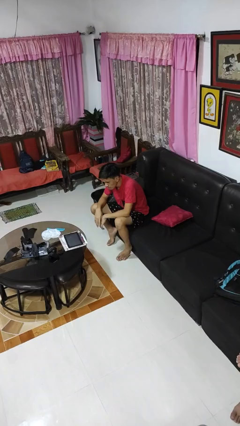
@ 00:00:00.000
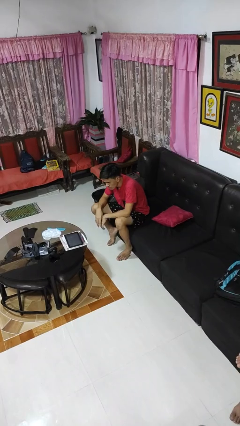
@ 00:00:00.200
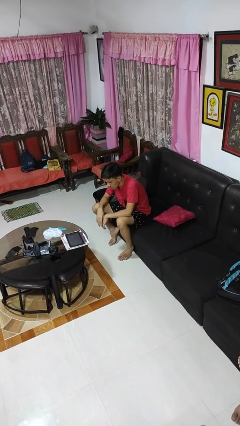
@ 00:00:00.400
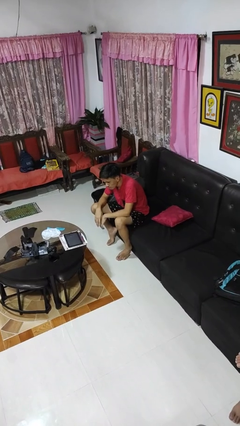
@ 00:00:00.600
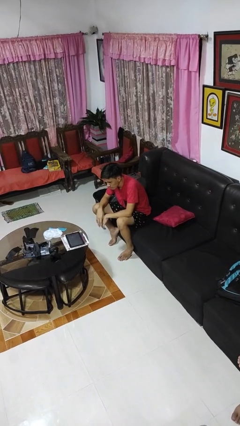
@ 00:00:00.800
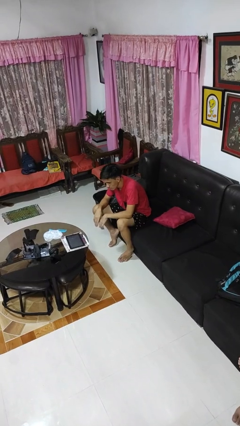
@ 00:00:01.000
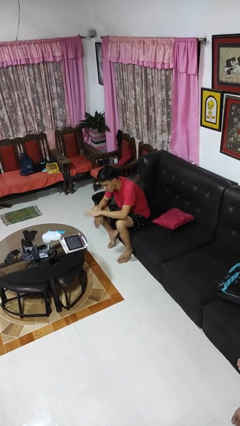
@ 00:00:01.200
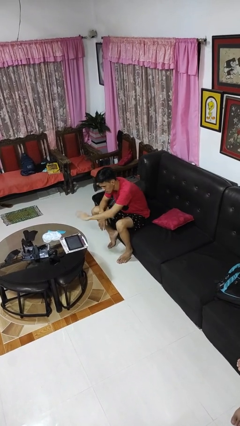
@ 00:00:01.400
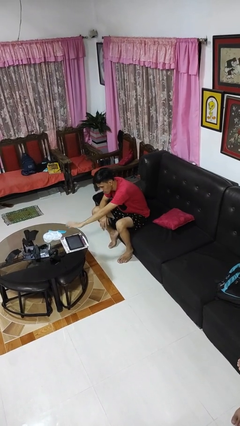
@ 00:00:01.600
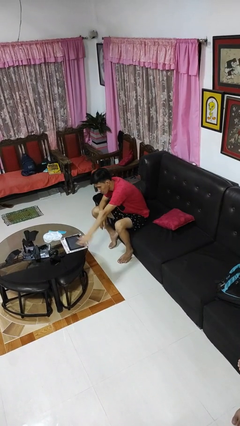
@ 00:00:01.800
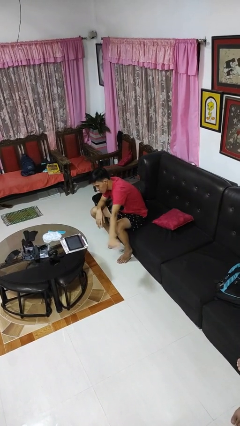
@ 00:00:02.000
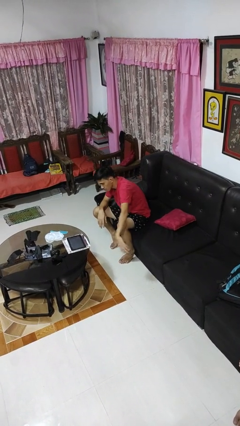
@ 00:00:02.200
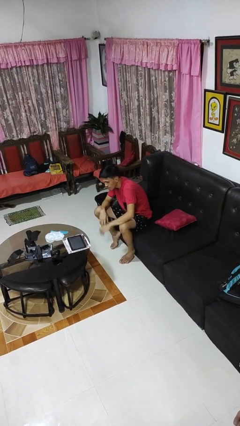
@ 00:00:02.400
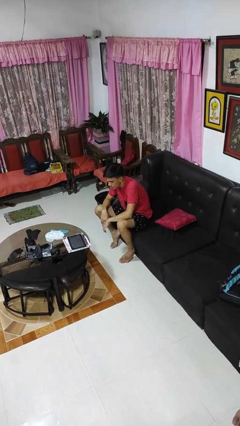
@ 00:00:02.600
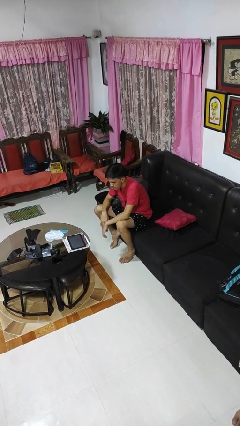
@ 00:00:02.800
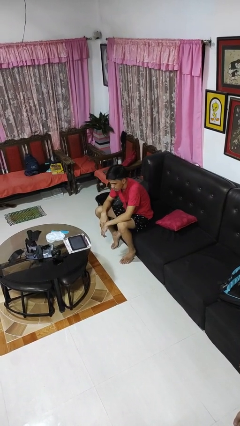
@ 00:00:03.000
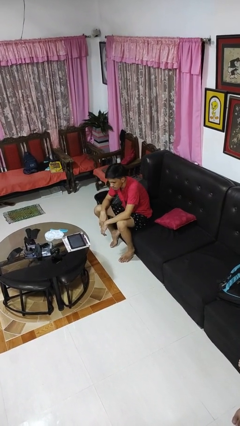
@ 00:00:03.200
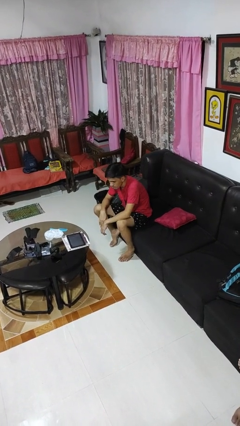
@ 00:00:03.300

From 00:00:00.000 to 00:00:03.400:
person waves hand over object

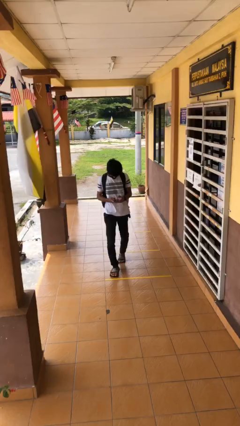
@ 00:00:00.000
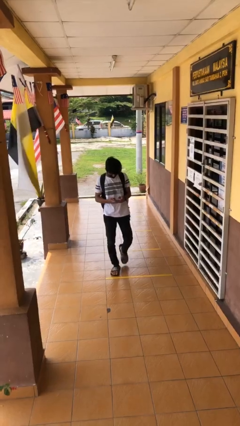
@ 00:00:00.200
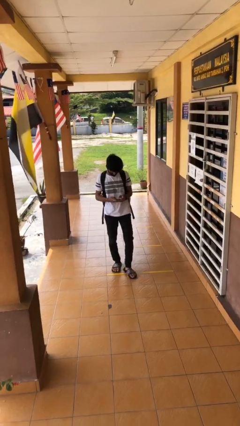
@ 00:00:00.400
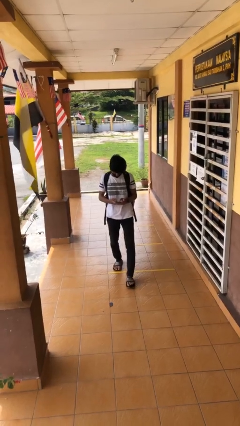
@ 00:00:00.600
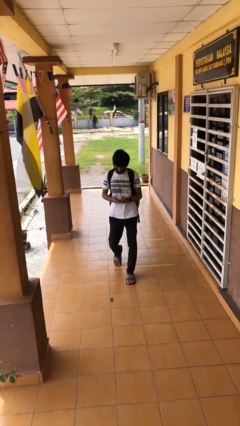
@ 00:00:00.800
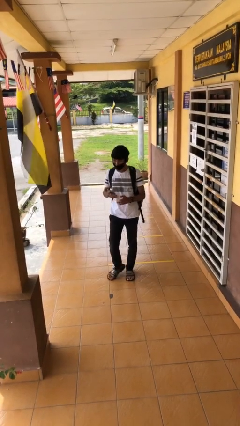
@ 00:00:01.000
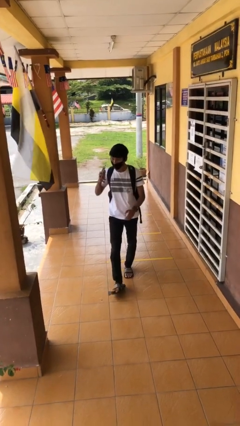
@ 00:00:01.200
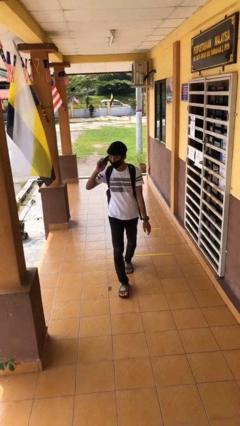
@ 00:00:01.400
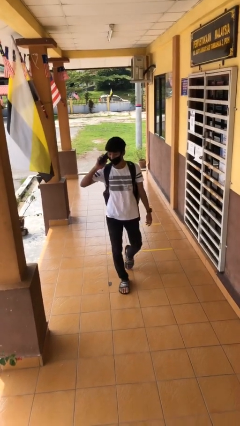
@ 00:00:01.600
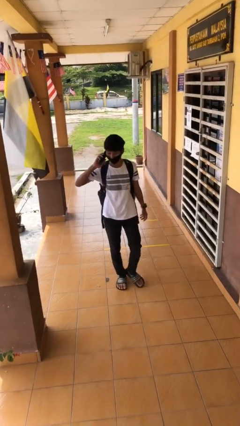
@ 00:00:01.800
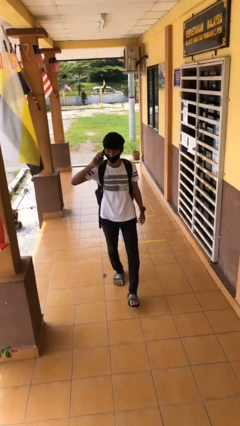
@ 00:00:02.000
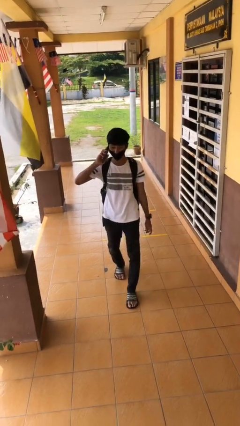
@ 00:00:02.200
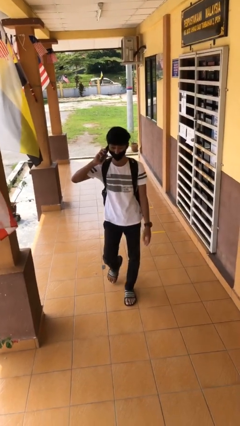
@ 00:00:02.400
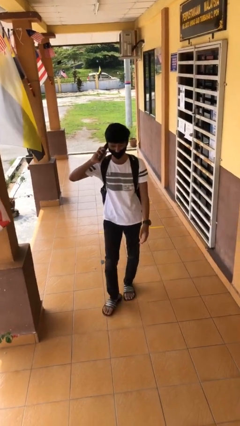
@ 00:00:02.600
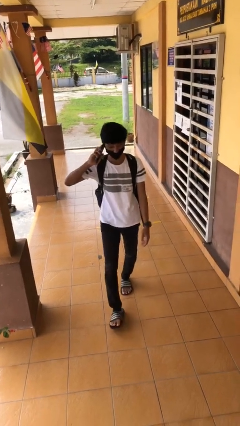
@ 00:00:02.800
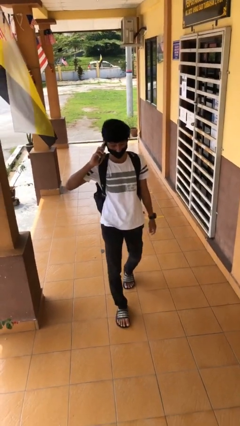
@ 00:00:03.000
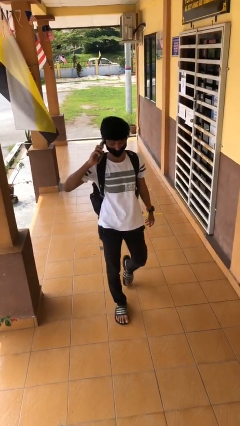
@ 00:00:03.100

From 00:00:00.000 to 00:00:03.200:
person talks on phone

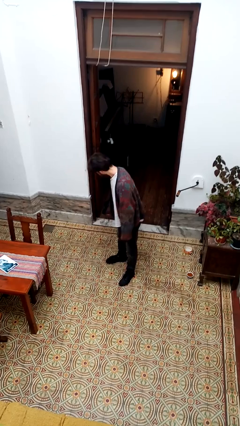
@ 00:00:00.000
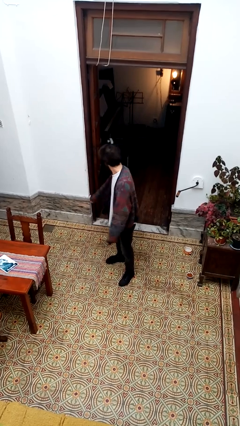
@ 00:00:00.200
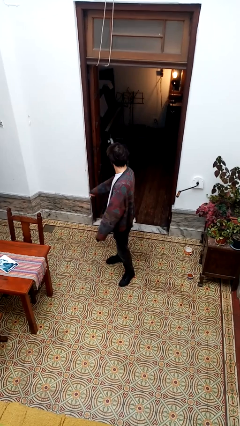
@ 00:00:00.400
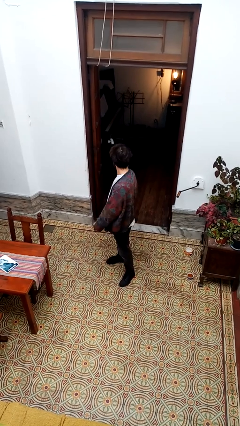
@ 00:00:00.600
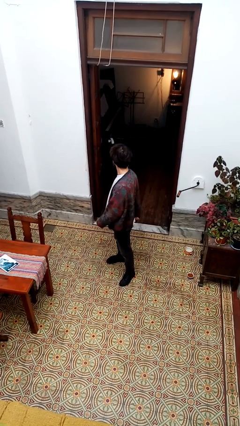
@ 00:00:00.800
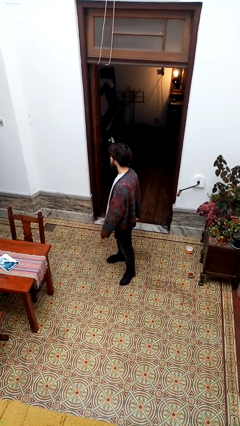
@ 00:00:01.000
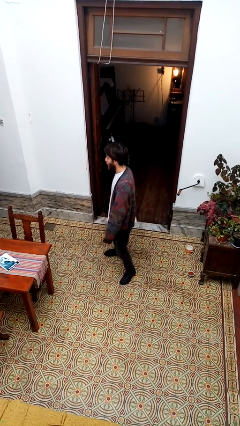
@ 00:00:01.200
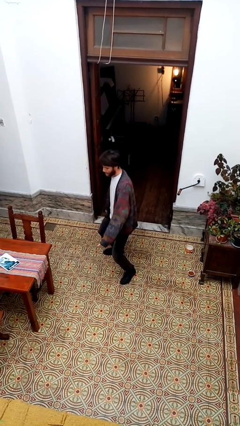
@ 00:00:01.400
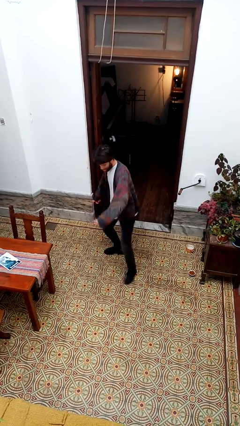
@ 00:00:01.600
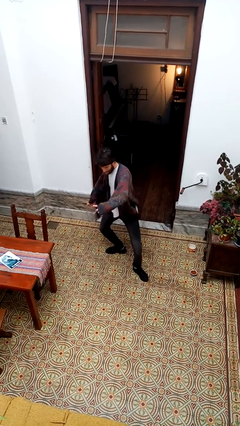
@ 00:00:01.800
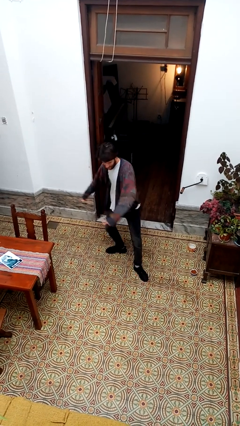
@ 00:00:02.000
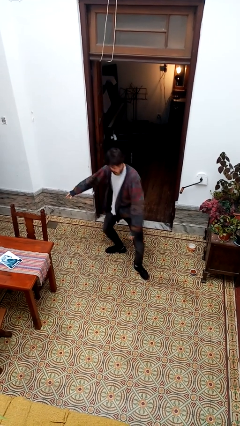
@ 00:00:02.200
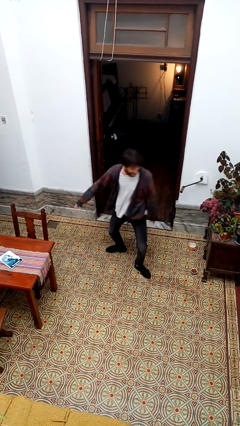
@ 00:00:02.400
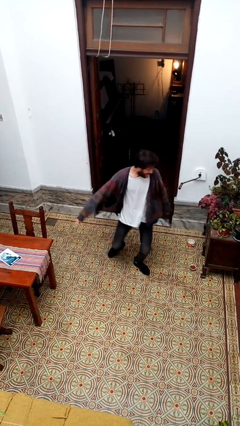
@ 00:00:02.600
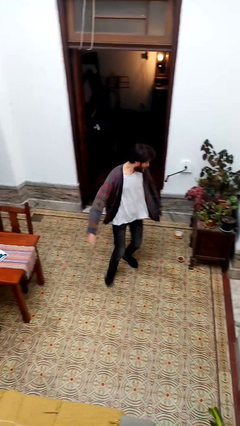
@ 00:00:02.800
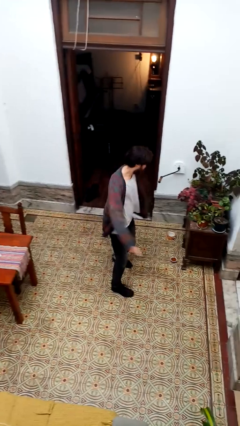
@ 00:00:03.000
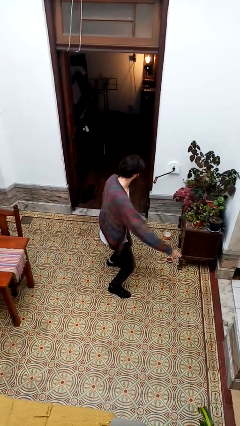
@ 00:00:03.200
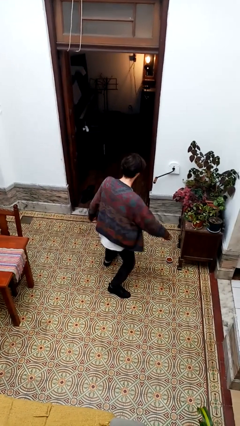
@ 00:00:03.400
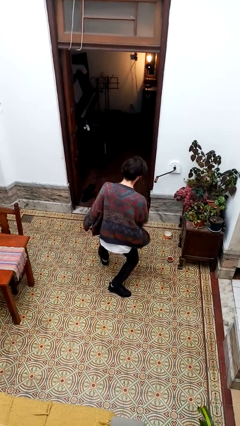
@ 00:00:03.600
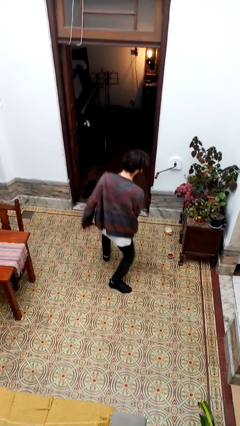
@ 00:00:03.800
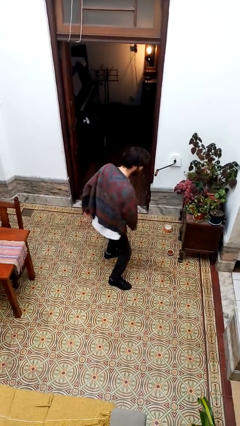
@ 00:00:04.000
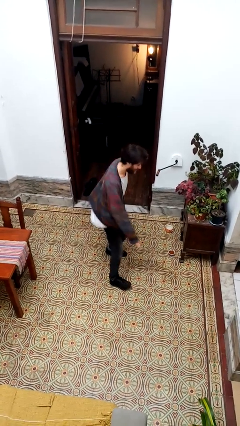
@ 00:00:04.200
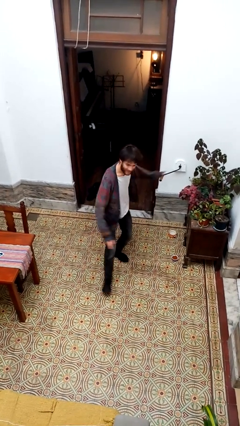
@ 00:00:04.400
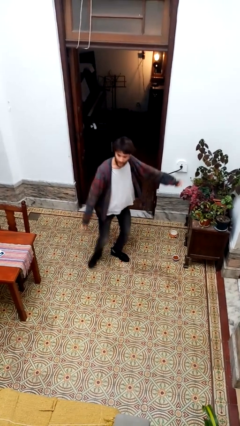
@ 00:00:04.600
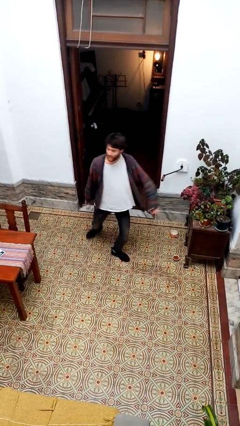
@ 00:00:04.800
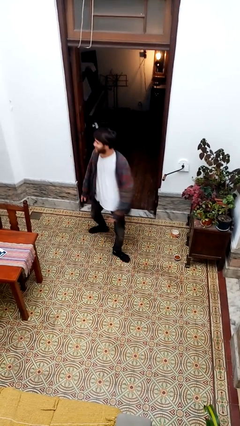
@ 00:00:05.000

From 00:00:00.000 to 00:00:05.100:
person dances in place

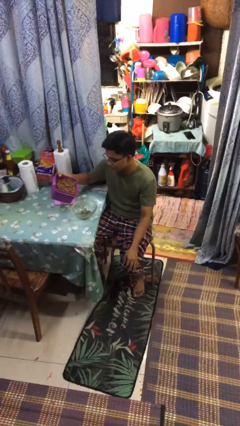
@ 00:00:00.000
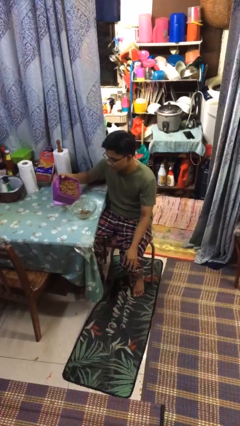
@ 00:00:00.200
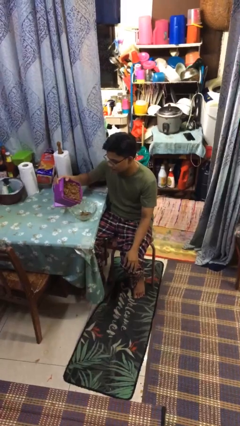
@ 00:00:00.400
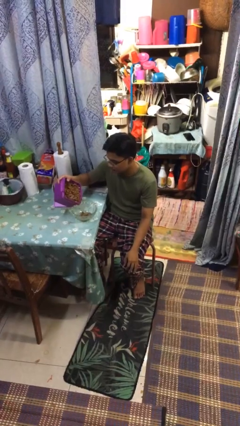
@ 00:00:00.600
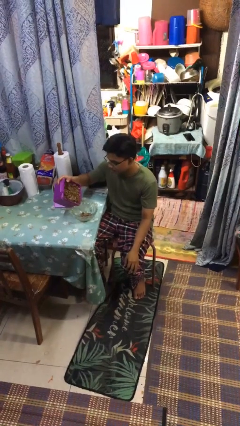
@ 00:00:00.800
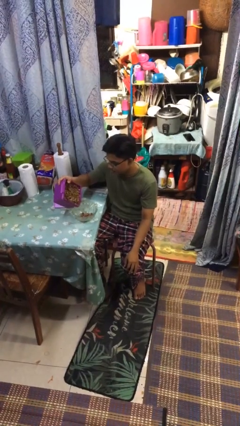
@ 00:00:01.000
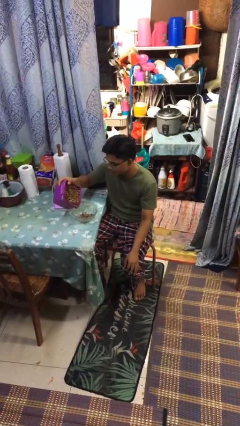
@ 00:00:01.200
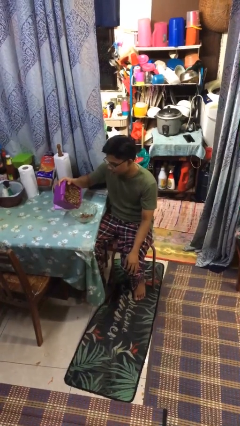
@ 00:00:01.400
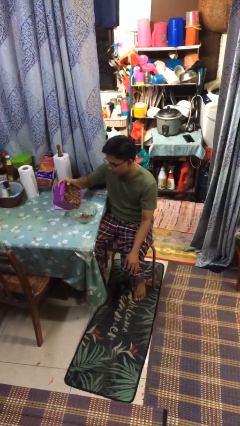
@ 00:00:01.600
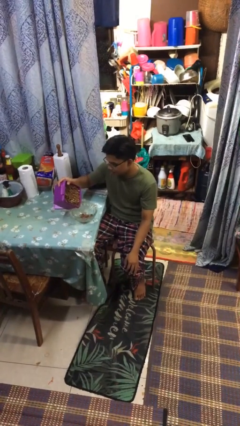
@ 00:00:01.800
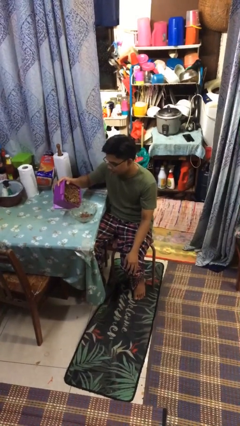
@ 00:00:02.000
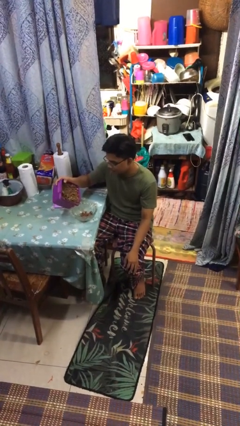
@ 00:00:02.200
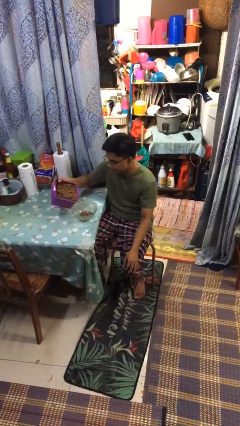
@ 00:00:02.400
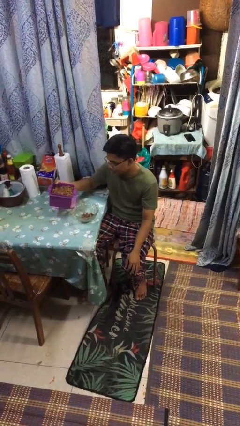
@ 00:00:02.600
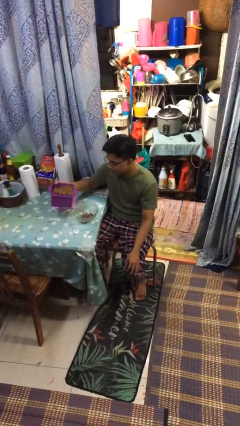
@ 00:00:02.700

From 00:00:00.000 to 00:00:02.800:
person pours into bowl

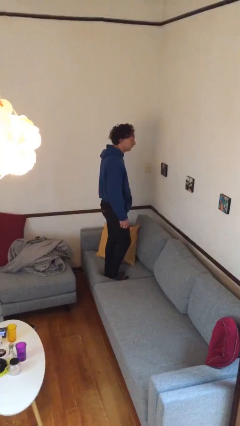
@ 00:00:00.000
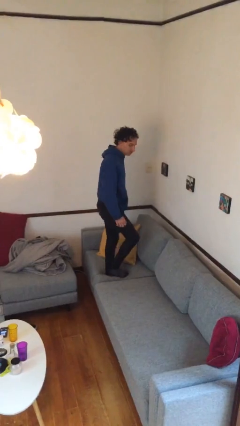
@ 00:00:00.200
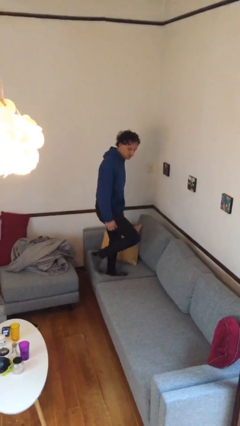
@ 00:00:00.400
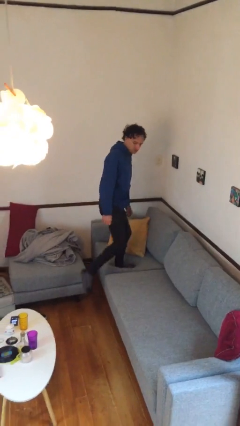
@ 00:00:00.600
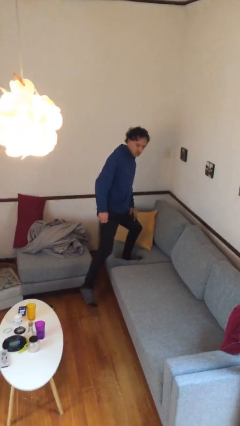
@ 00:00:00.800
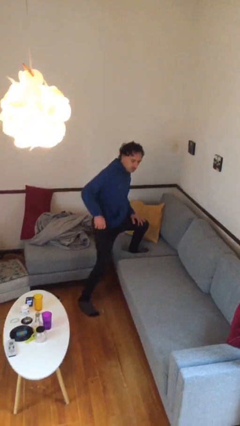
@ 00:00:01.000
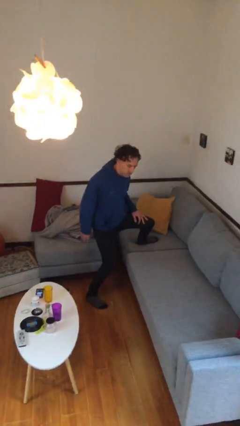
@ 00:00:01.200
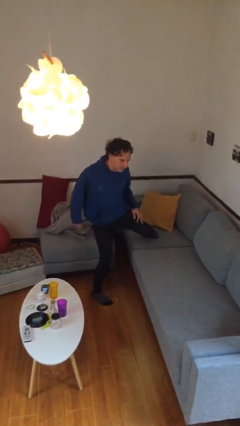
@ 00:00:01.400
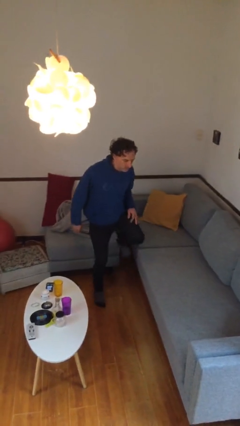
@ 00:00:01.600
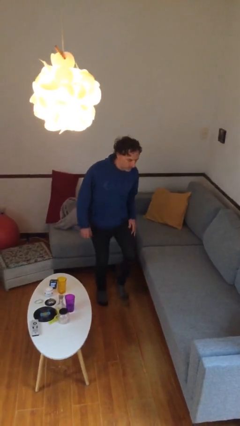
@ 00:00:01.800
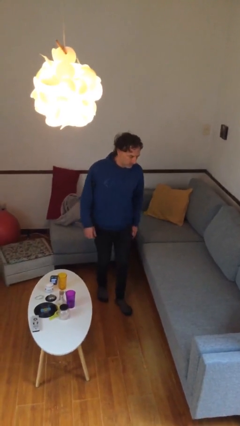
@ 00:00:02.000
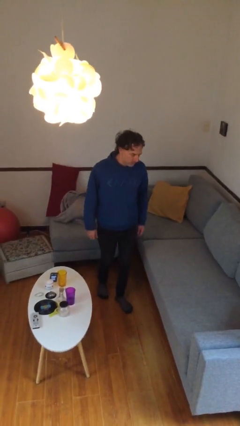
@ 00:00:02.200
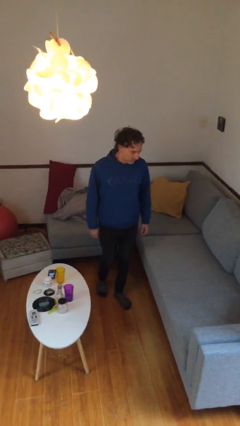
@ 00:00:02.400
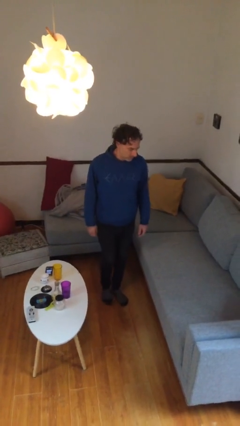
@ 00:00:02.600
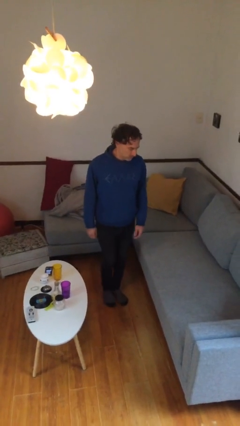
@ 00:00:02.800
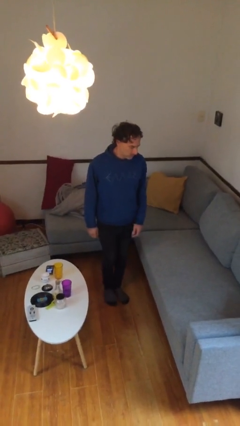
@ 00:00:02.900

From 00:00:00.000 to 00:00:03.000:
person climbs off couch
